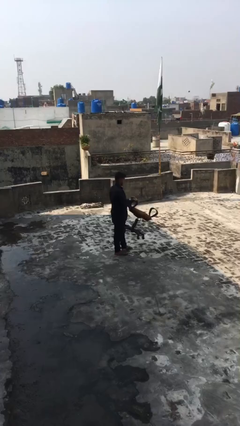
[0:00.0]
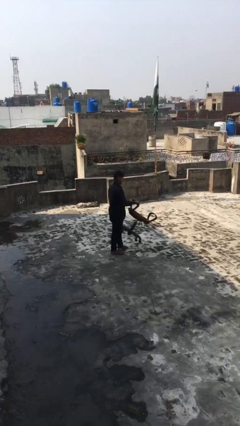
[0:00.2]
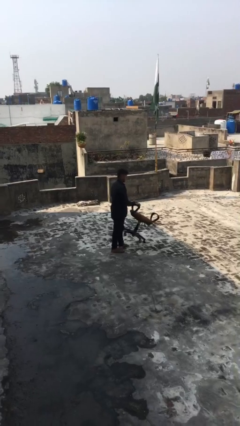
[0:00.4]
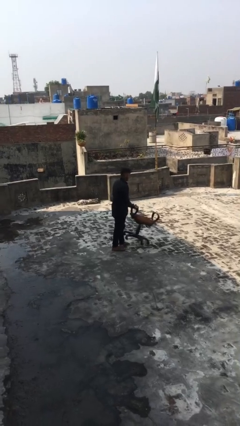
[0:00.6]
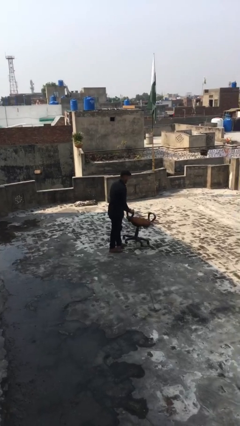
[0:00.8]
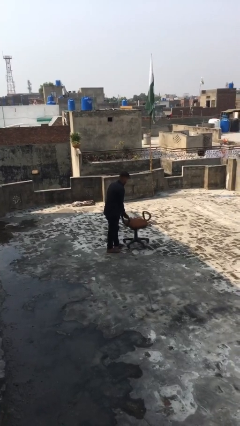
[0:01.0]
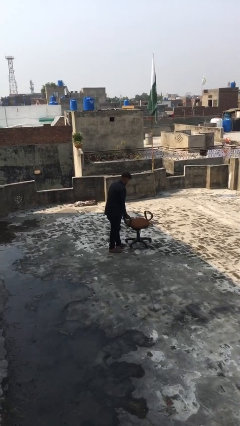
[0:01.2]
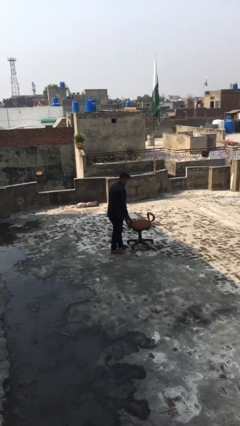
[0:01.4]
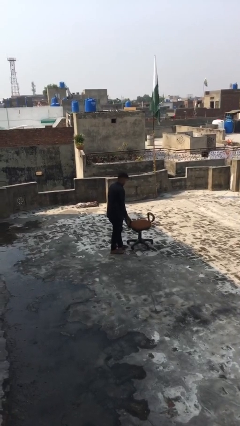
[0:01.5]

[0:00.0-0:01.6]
person puts down object on floor

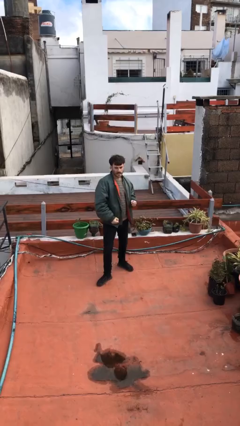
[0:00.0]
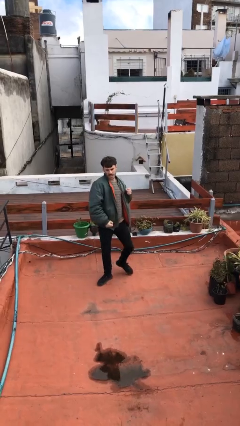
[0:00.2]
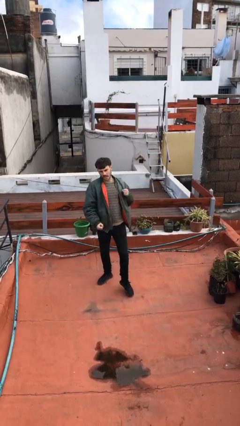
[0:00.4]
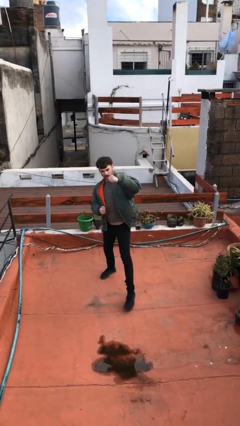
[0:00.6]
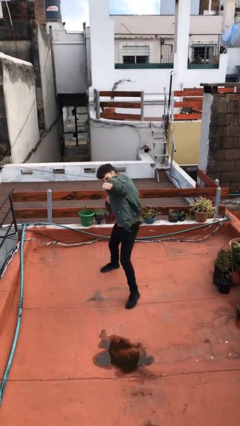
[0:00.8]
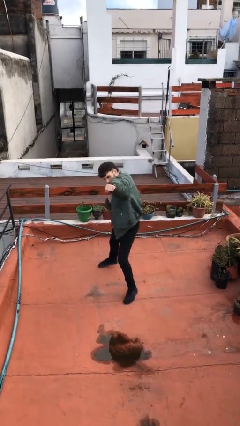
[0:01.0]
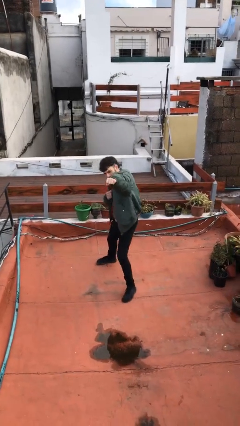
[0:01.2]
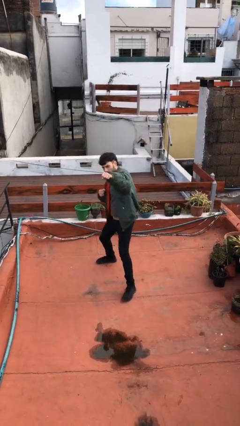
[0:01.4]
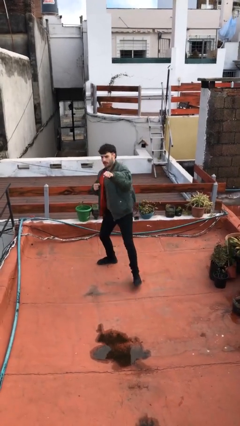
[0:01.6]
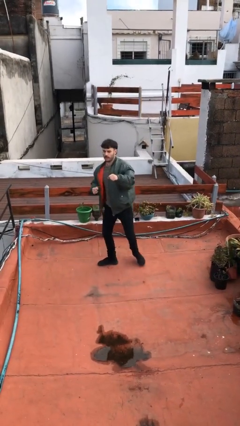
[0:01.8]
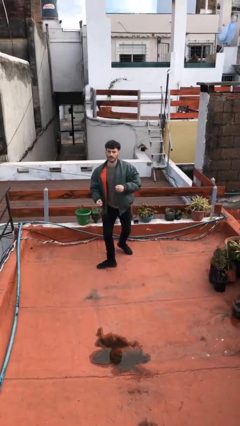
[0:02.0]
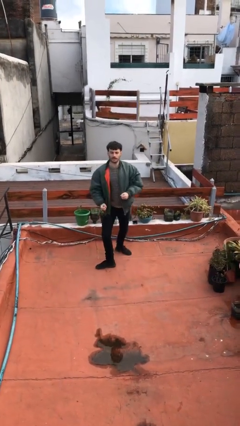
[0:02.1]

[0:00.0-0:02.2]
person punches

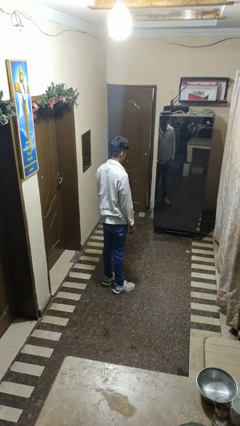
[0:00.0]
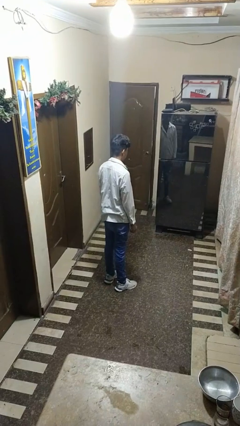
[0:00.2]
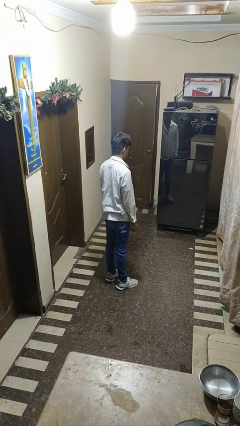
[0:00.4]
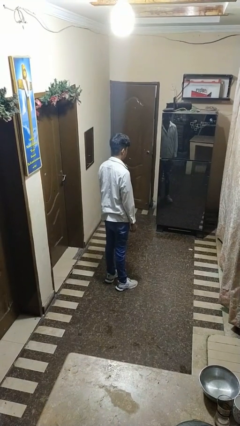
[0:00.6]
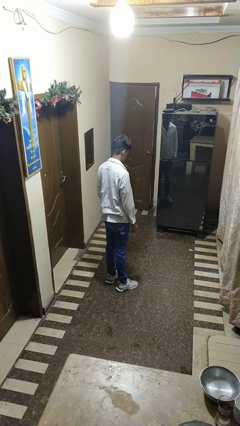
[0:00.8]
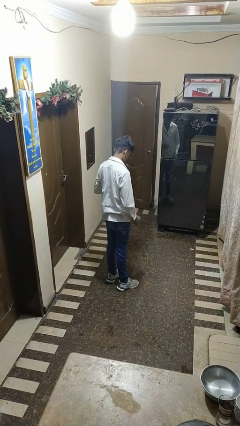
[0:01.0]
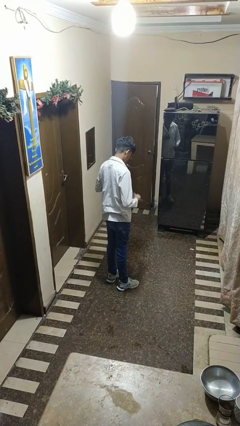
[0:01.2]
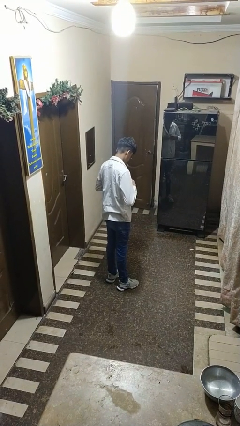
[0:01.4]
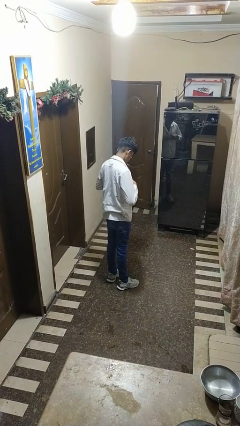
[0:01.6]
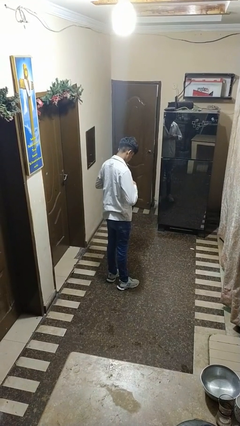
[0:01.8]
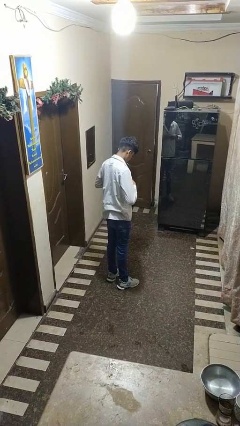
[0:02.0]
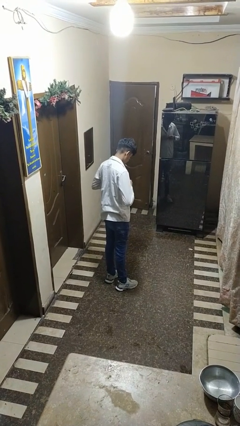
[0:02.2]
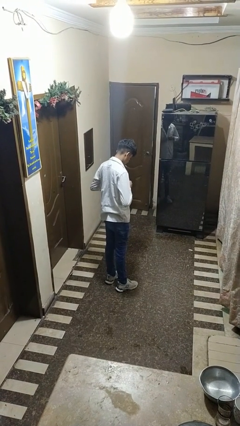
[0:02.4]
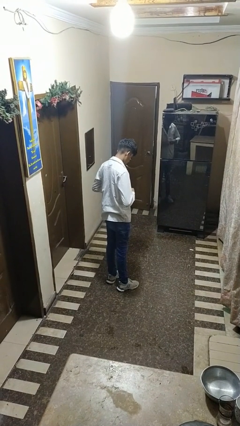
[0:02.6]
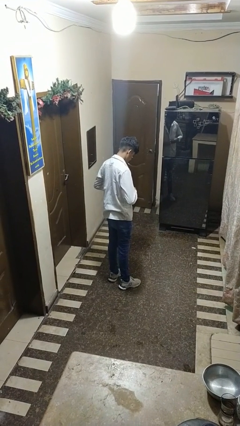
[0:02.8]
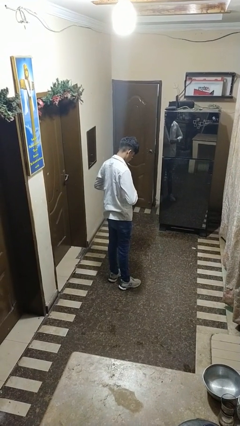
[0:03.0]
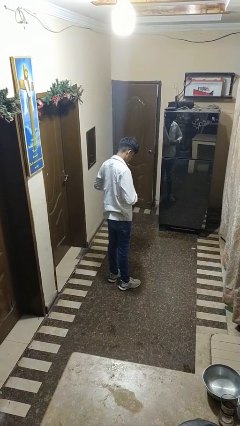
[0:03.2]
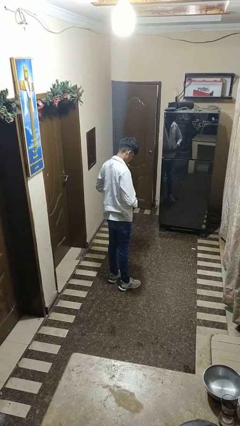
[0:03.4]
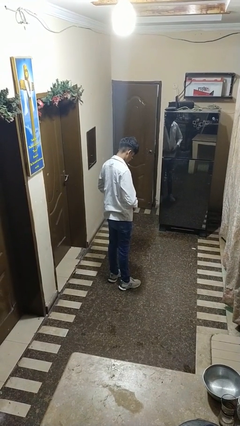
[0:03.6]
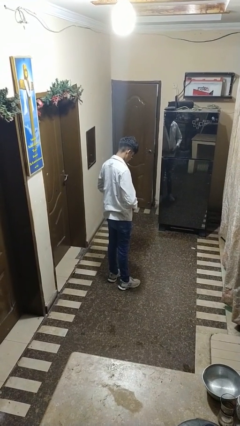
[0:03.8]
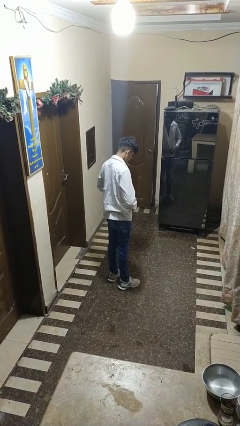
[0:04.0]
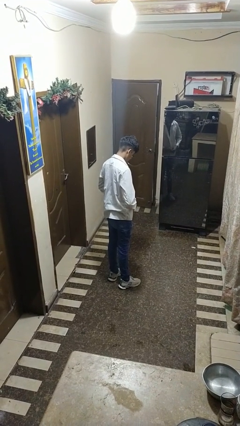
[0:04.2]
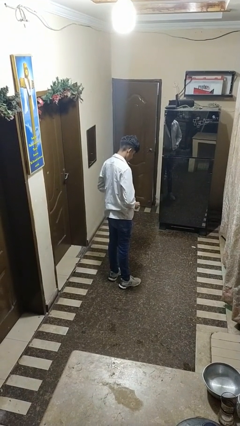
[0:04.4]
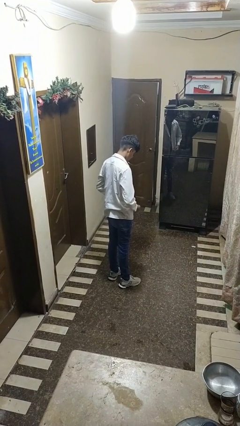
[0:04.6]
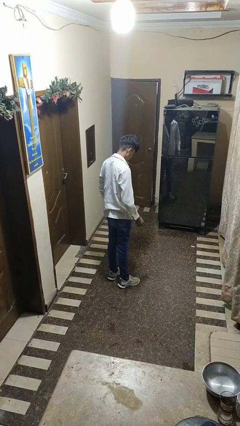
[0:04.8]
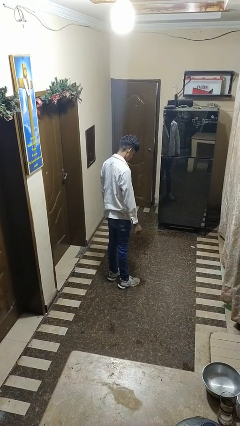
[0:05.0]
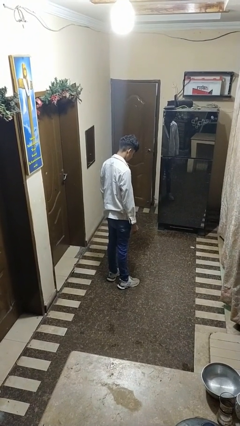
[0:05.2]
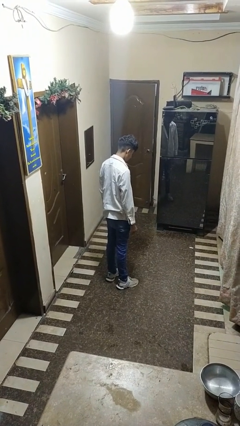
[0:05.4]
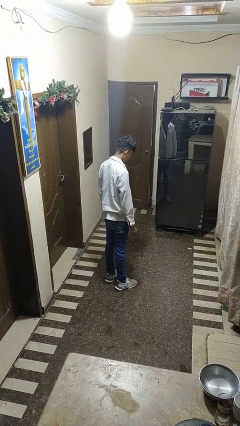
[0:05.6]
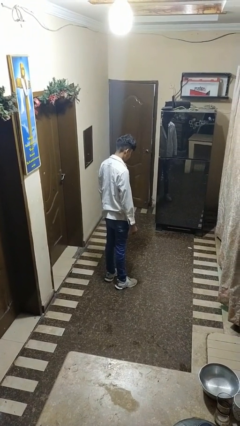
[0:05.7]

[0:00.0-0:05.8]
person unbuttons shirt

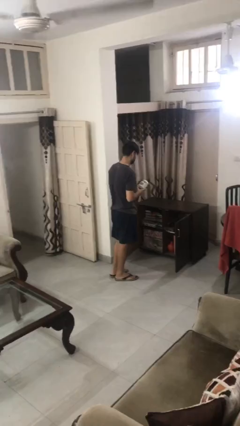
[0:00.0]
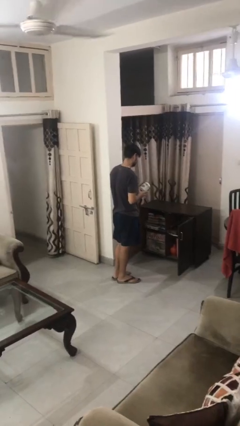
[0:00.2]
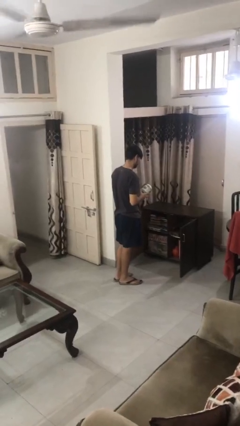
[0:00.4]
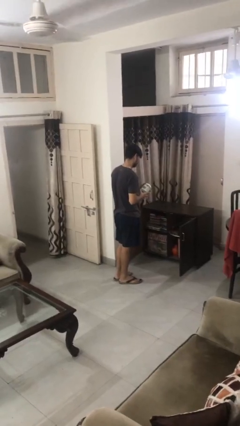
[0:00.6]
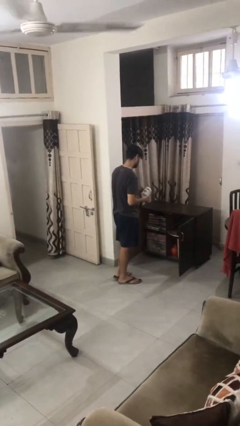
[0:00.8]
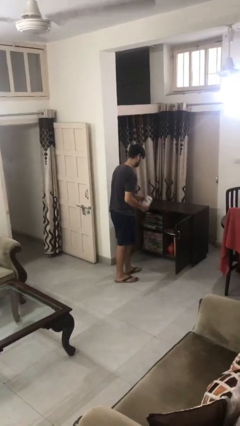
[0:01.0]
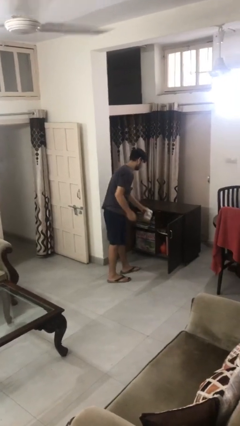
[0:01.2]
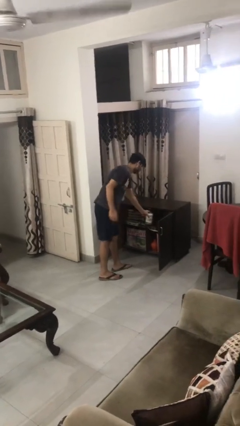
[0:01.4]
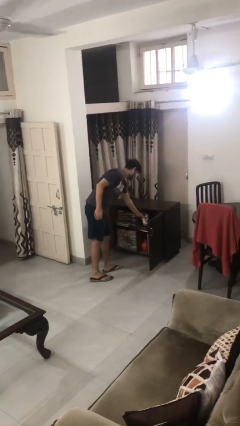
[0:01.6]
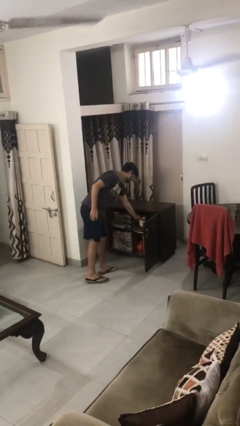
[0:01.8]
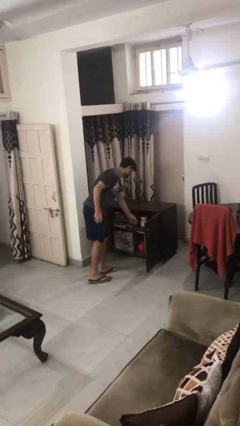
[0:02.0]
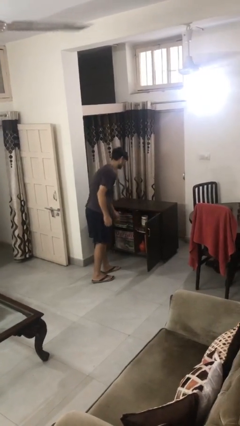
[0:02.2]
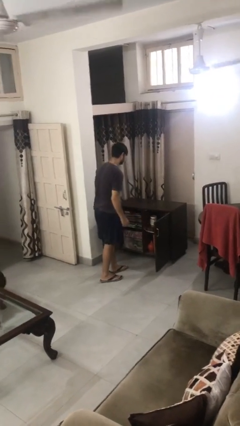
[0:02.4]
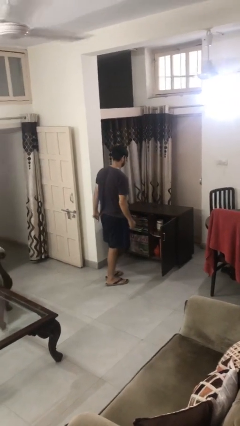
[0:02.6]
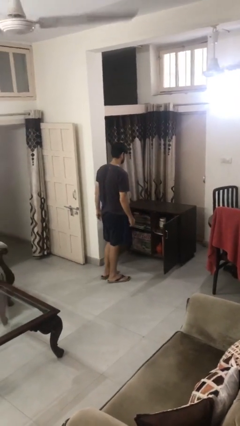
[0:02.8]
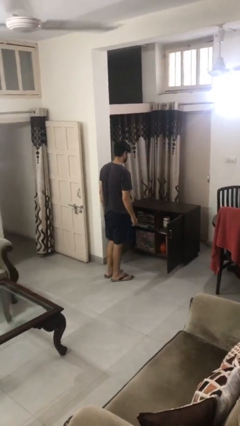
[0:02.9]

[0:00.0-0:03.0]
person puts down object into cabinet

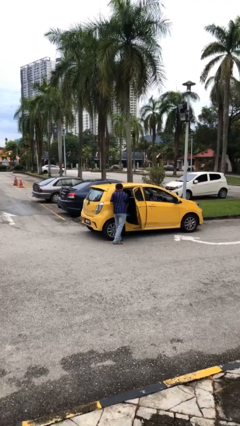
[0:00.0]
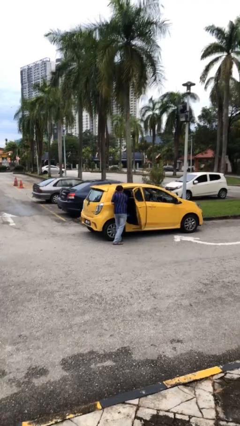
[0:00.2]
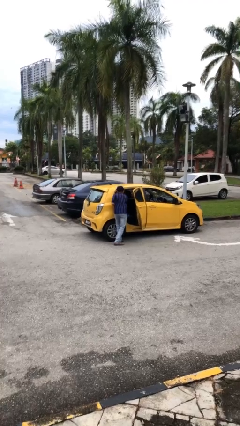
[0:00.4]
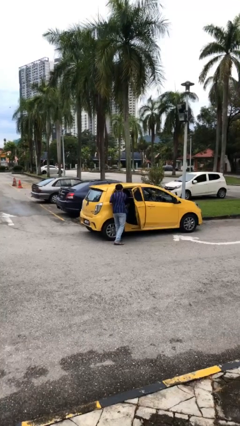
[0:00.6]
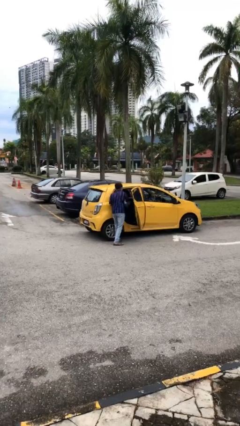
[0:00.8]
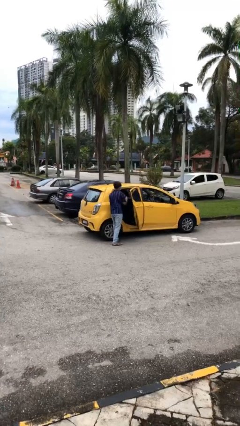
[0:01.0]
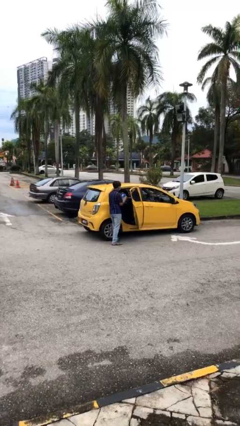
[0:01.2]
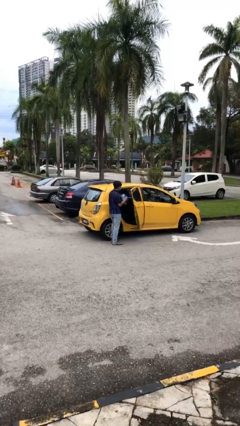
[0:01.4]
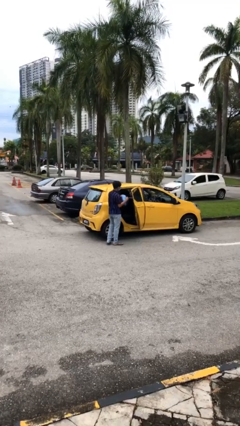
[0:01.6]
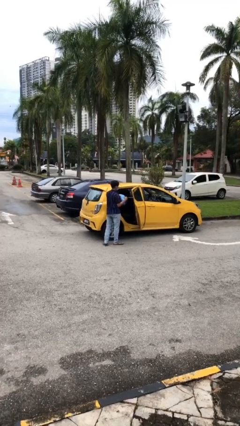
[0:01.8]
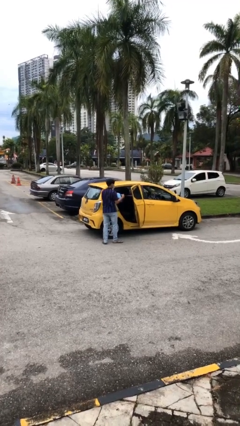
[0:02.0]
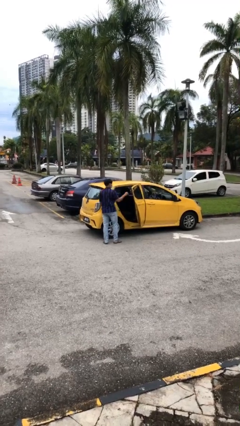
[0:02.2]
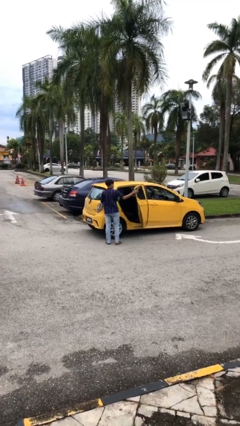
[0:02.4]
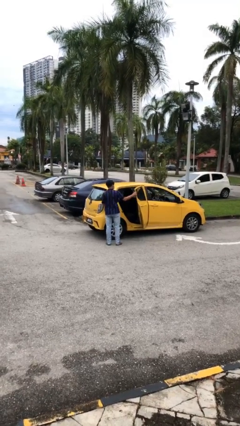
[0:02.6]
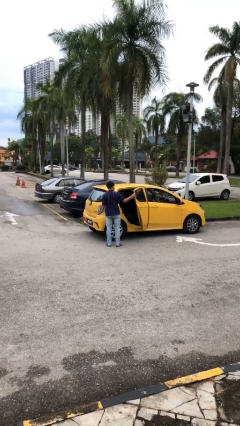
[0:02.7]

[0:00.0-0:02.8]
person unloads car

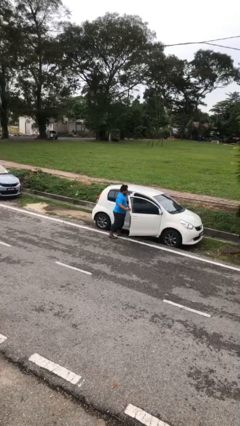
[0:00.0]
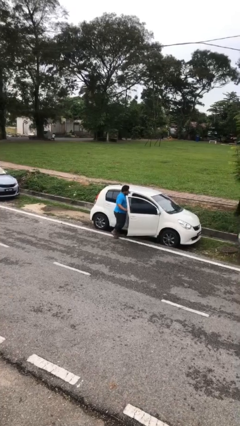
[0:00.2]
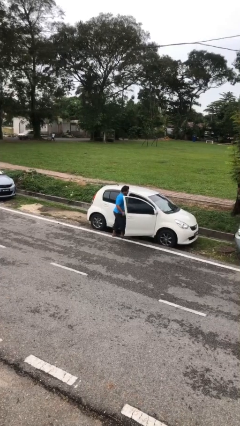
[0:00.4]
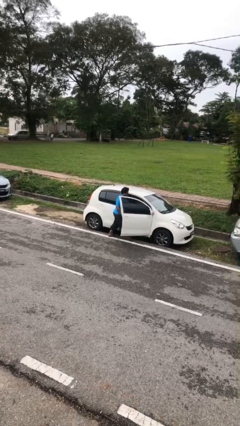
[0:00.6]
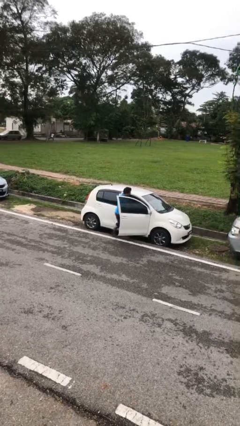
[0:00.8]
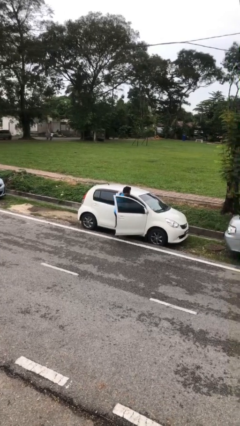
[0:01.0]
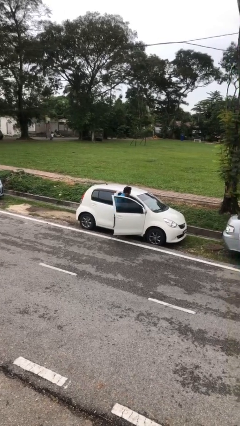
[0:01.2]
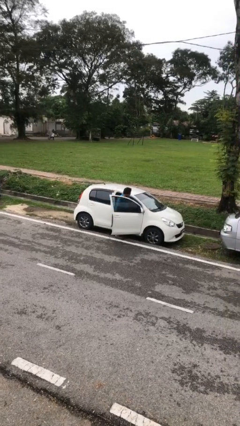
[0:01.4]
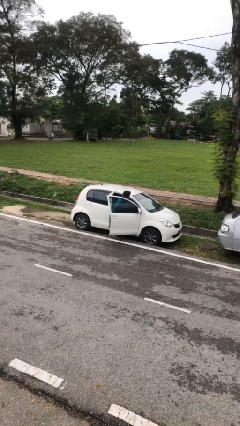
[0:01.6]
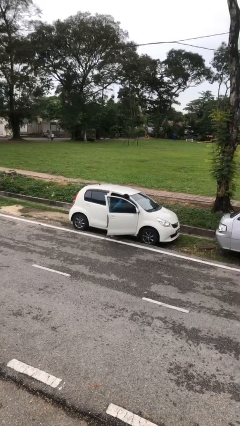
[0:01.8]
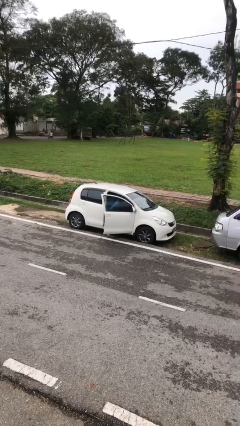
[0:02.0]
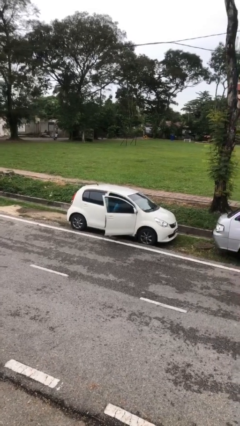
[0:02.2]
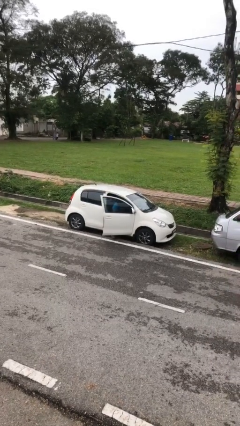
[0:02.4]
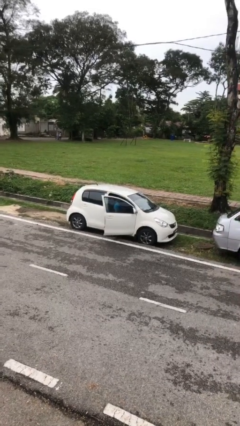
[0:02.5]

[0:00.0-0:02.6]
person enters car
